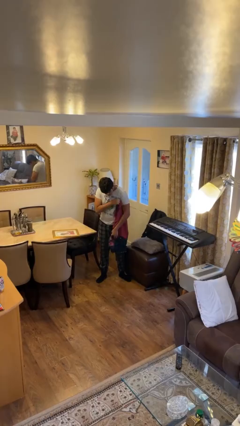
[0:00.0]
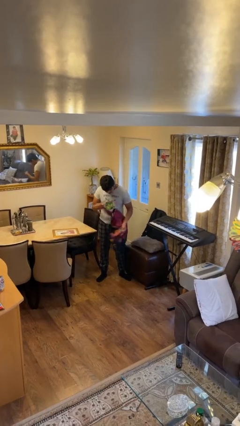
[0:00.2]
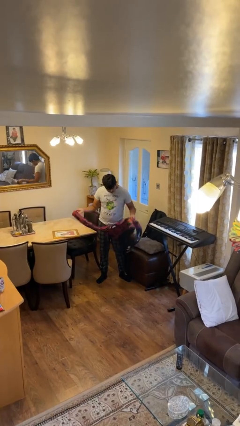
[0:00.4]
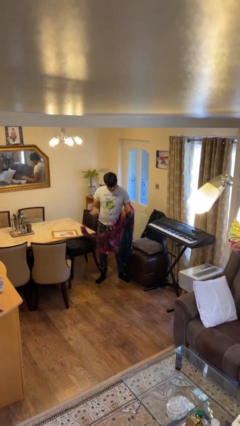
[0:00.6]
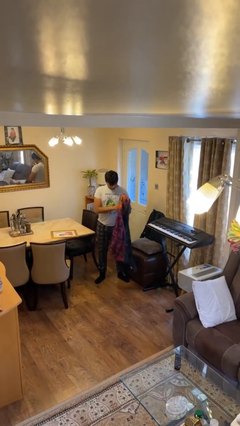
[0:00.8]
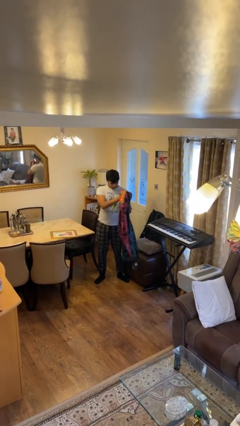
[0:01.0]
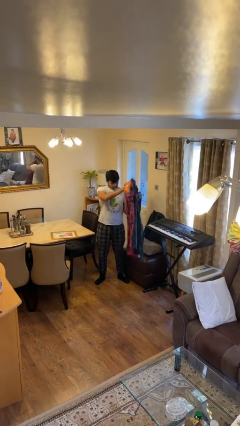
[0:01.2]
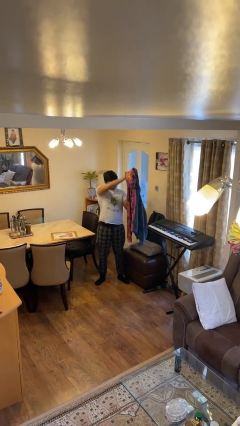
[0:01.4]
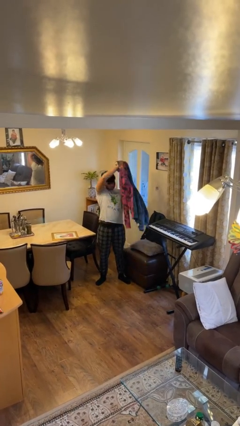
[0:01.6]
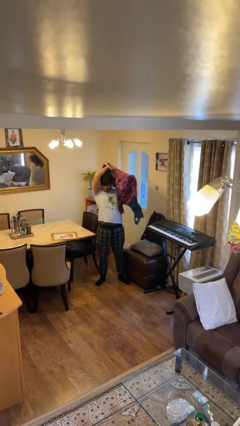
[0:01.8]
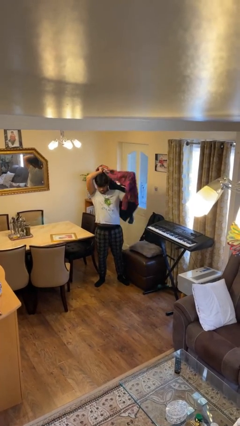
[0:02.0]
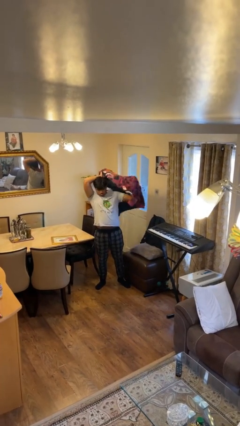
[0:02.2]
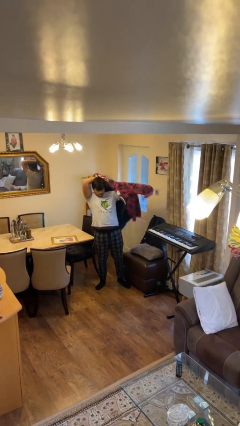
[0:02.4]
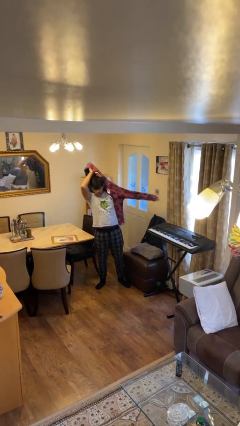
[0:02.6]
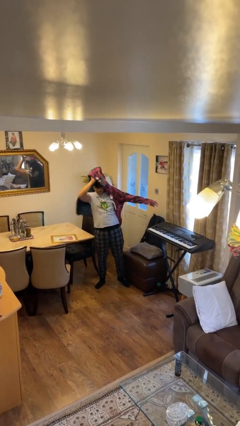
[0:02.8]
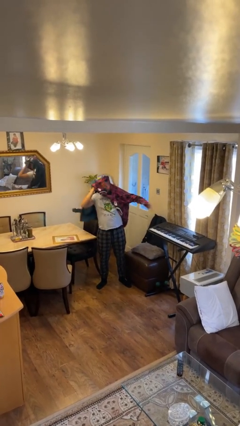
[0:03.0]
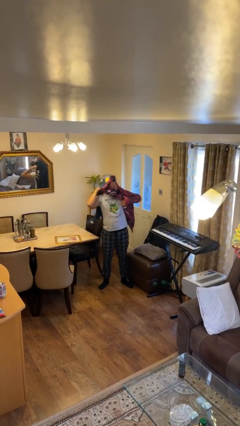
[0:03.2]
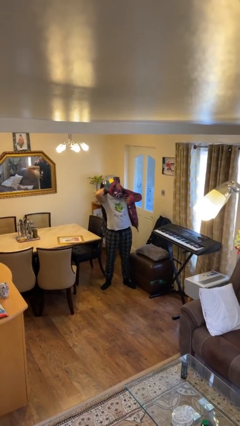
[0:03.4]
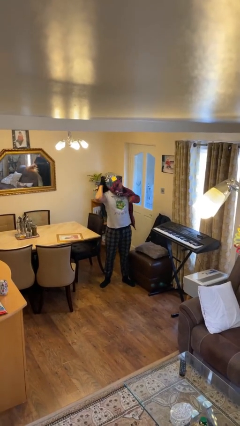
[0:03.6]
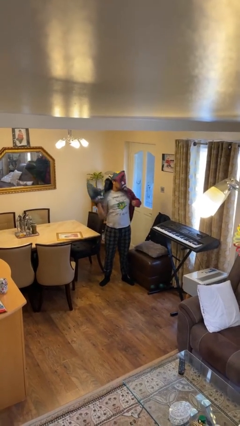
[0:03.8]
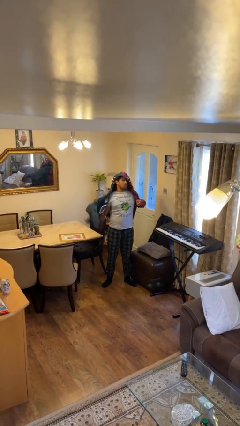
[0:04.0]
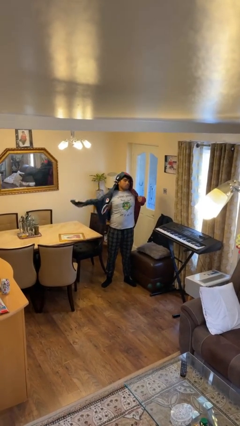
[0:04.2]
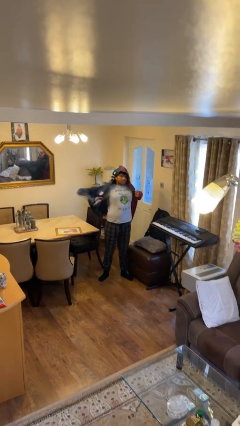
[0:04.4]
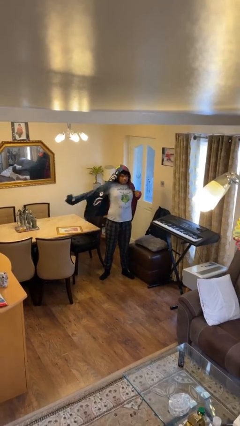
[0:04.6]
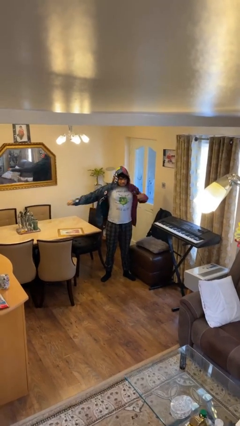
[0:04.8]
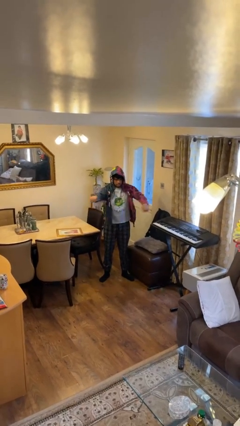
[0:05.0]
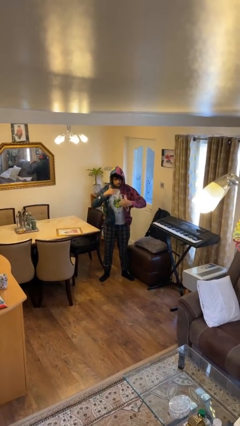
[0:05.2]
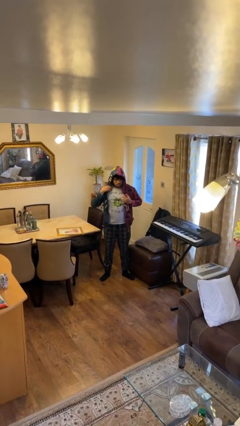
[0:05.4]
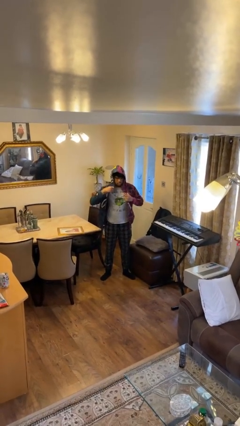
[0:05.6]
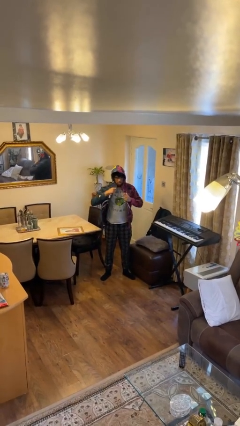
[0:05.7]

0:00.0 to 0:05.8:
person puts on hoodie

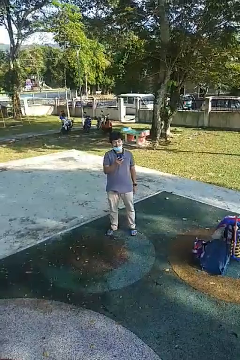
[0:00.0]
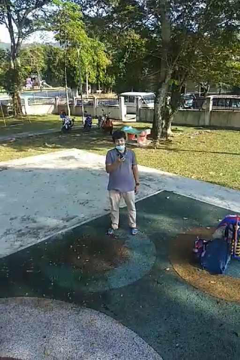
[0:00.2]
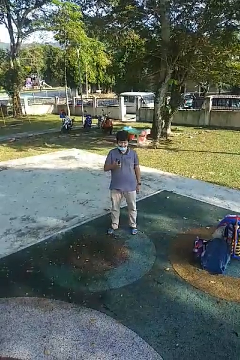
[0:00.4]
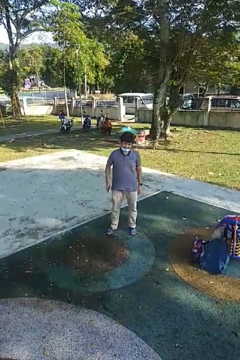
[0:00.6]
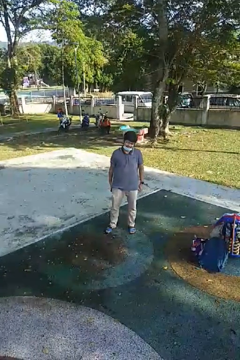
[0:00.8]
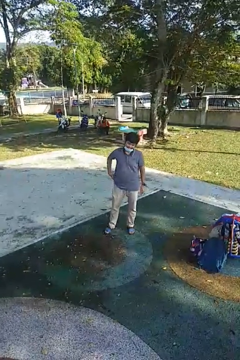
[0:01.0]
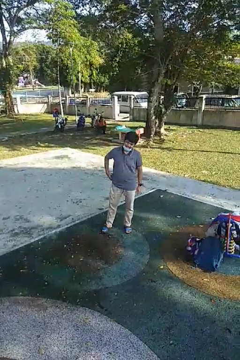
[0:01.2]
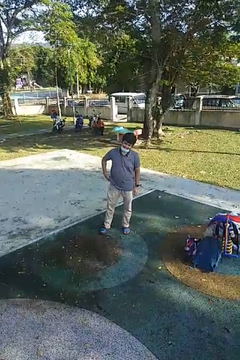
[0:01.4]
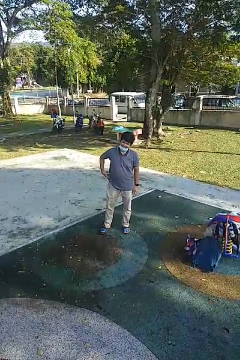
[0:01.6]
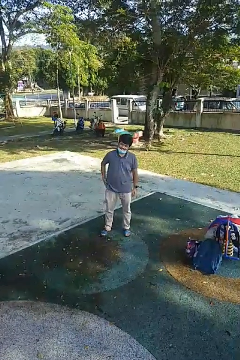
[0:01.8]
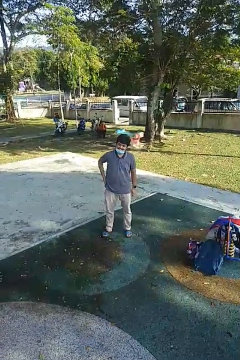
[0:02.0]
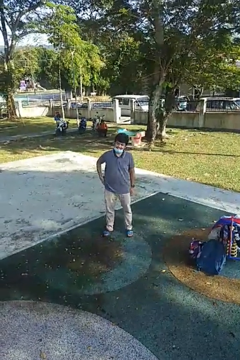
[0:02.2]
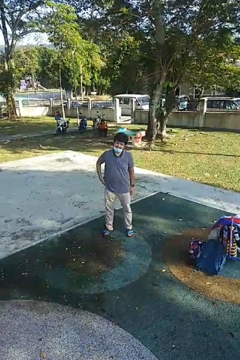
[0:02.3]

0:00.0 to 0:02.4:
person puts phone into pocket

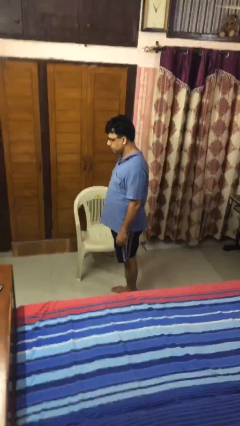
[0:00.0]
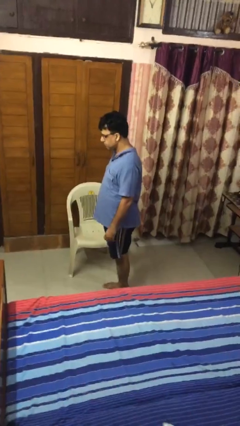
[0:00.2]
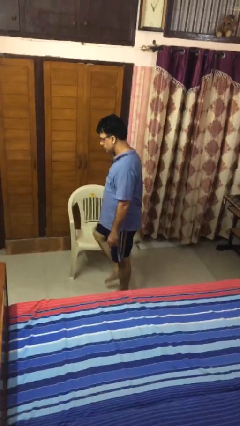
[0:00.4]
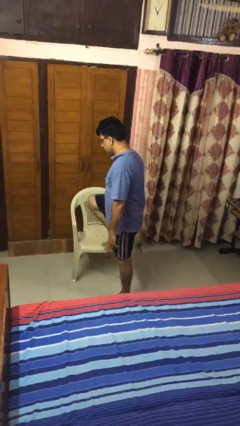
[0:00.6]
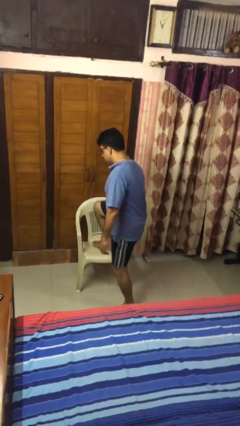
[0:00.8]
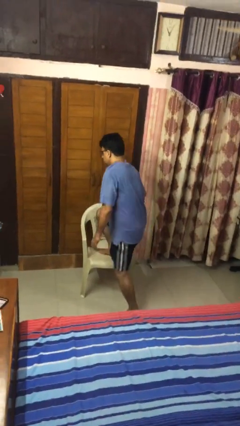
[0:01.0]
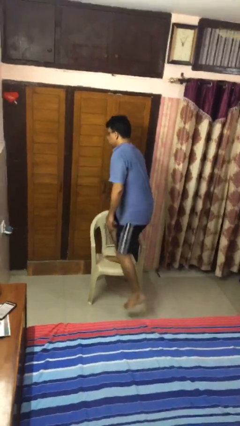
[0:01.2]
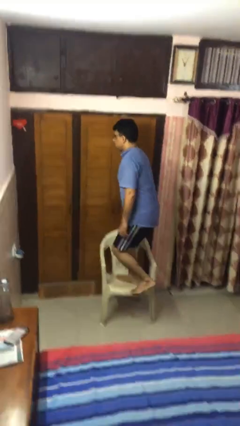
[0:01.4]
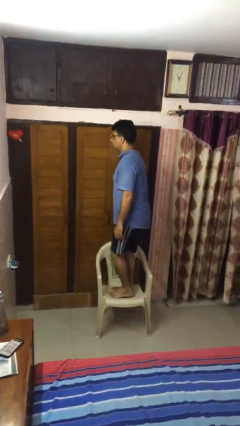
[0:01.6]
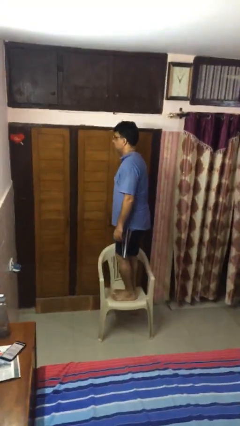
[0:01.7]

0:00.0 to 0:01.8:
person climbs on chair

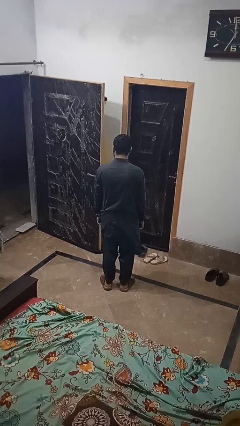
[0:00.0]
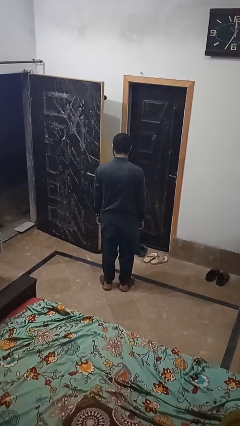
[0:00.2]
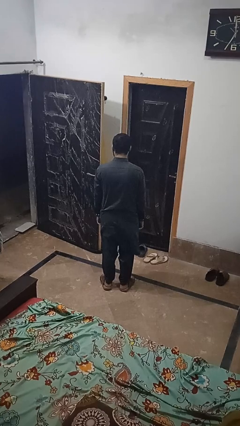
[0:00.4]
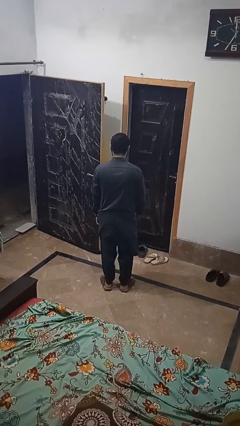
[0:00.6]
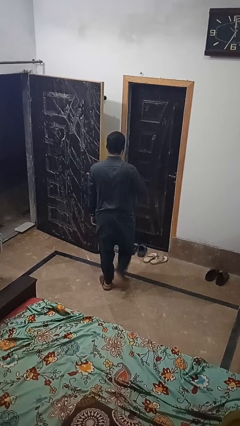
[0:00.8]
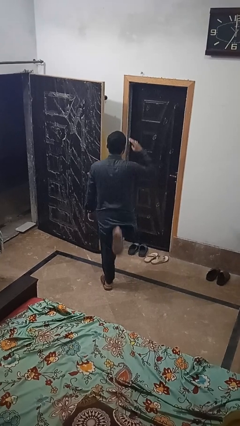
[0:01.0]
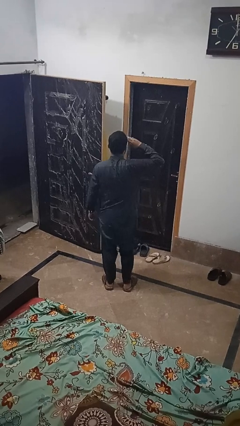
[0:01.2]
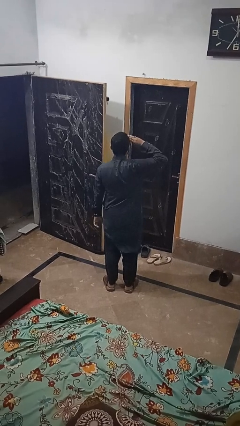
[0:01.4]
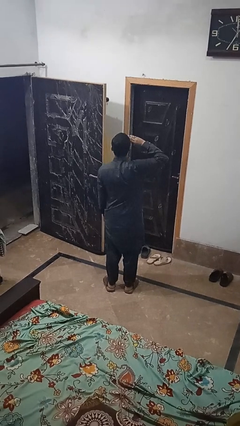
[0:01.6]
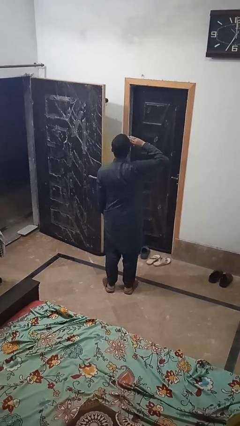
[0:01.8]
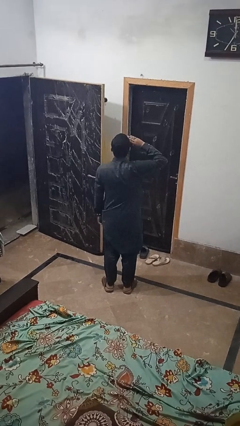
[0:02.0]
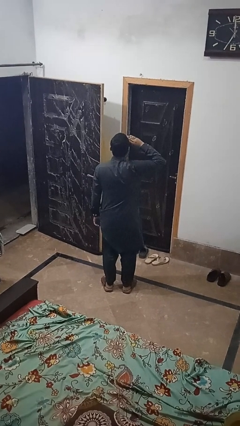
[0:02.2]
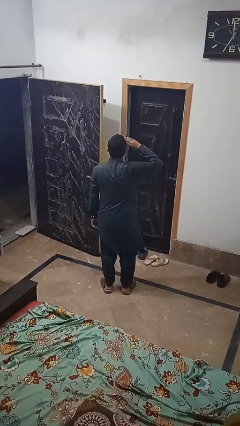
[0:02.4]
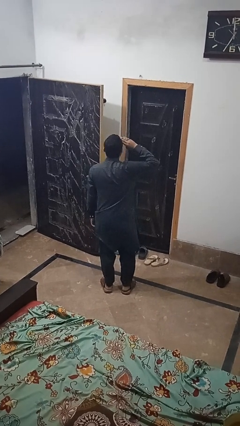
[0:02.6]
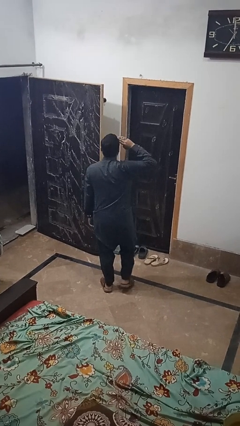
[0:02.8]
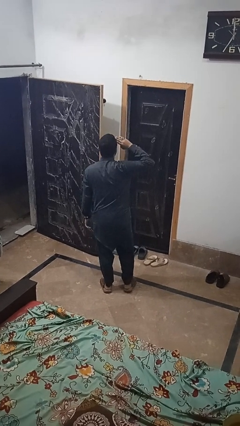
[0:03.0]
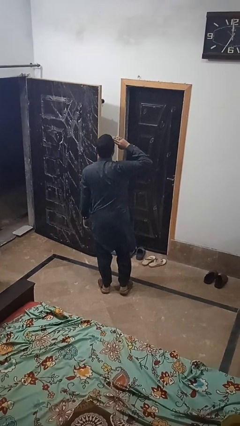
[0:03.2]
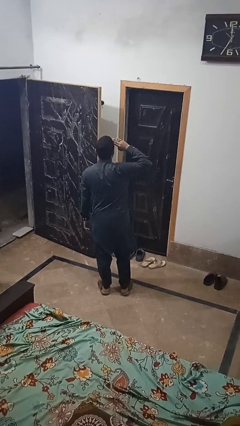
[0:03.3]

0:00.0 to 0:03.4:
person salutes

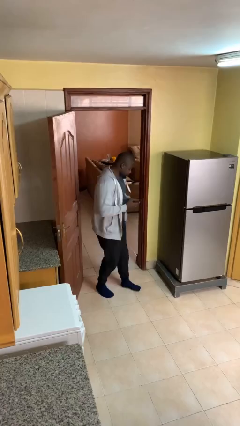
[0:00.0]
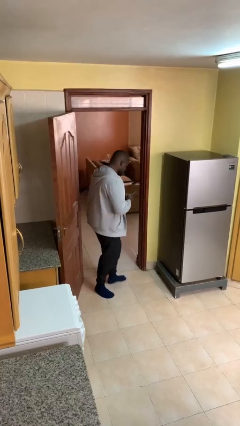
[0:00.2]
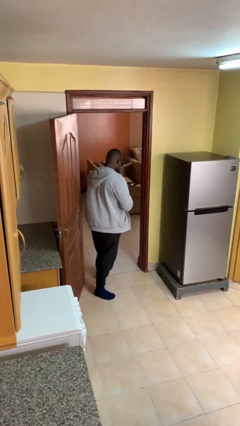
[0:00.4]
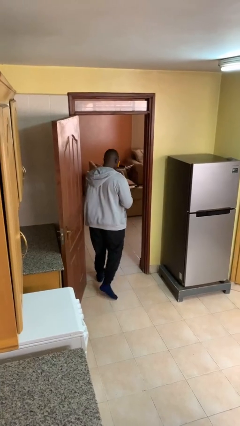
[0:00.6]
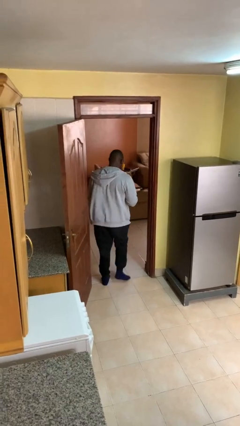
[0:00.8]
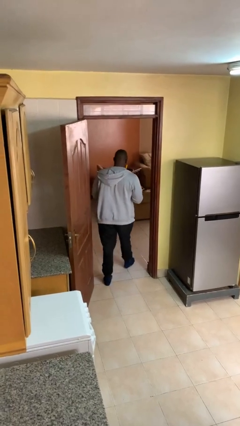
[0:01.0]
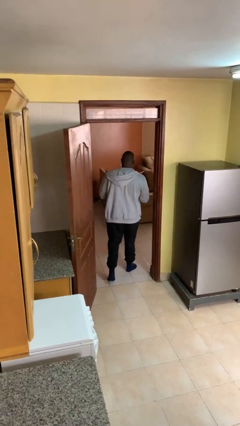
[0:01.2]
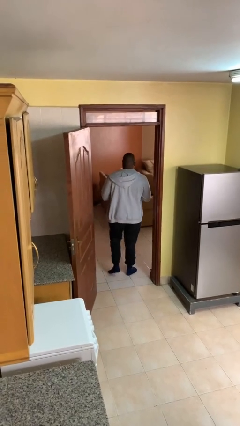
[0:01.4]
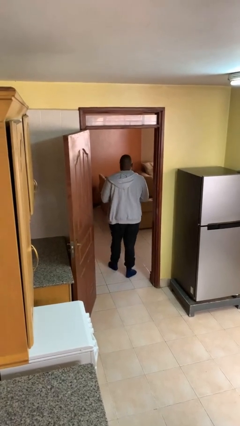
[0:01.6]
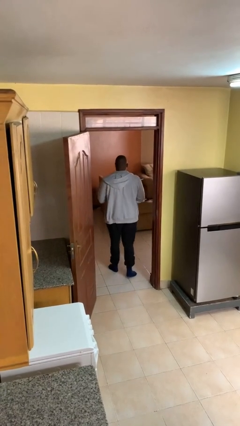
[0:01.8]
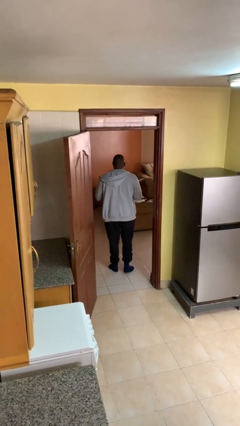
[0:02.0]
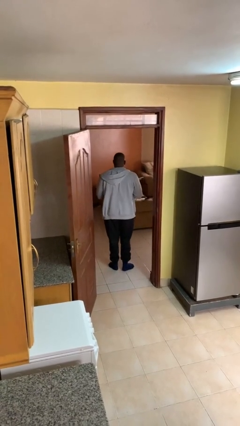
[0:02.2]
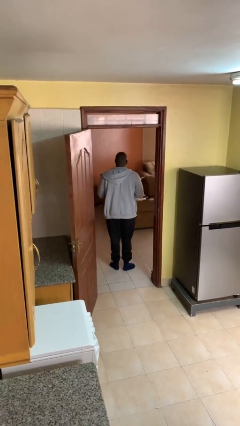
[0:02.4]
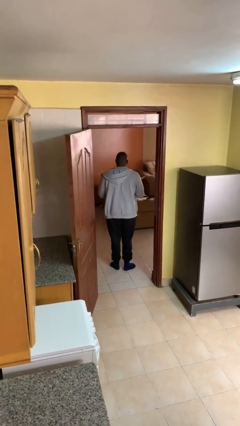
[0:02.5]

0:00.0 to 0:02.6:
person exits scene through structure

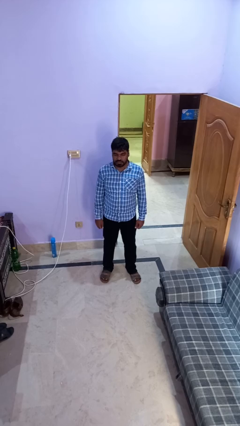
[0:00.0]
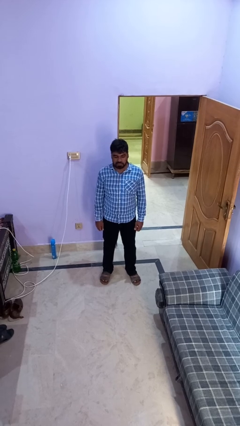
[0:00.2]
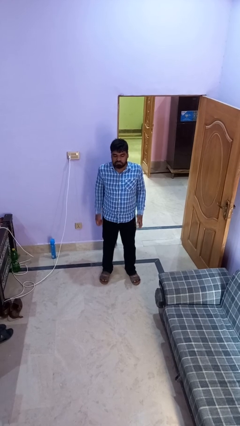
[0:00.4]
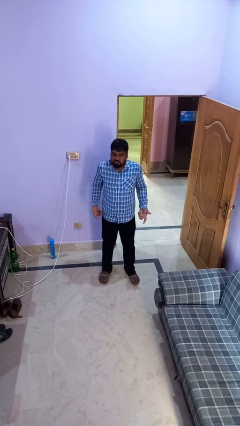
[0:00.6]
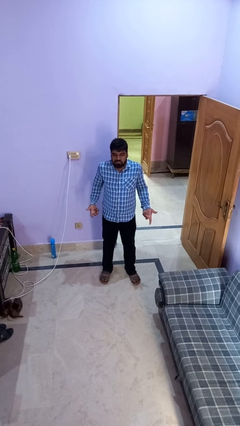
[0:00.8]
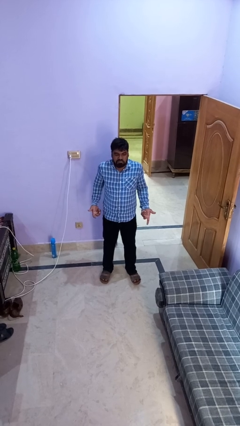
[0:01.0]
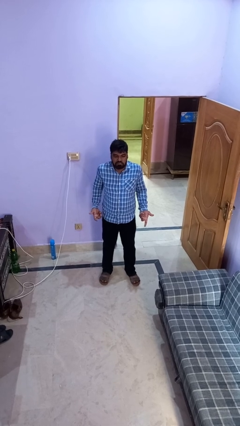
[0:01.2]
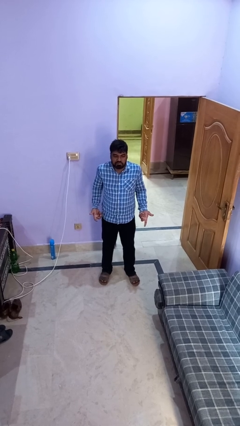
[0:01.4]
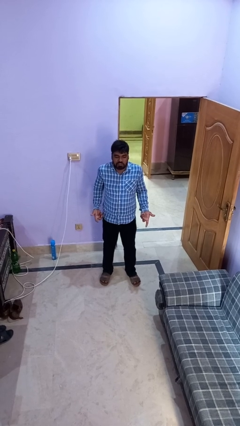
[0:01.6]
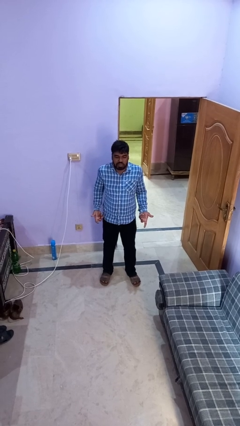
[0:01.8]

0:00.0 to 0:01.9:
person shrugs
